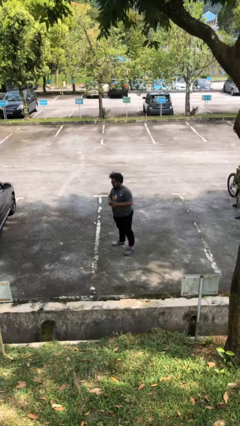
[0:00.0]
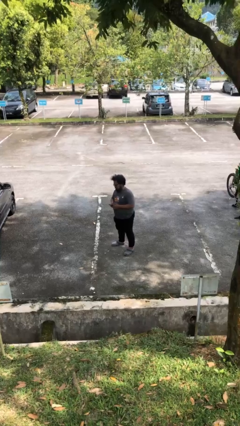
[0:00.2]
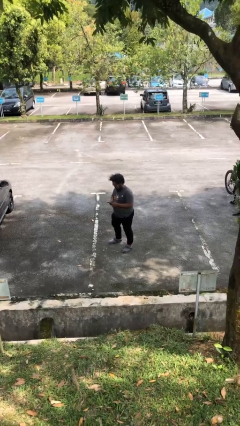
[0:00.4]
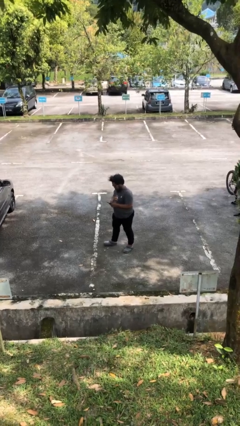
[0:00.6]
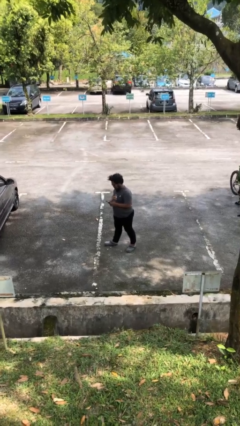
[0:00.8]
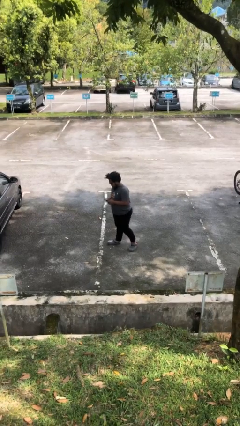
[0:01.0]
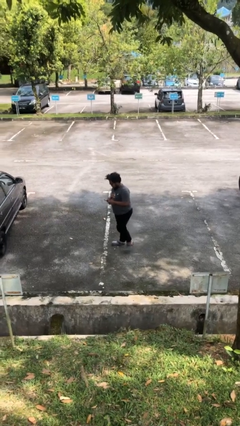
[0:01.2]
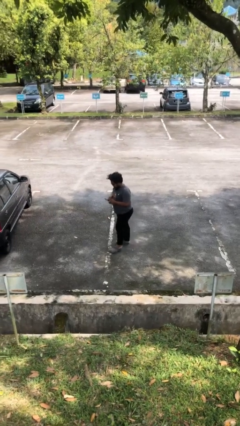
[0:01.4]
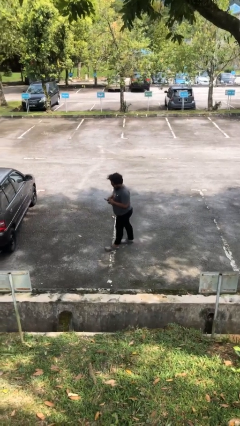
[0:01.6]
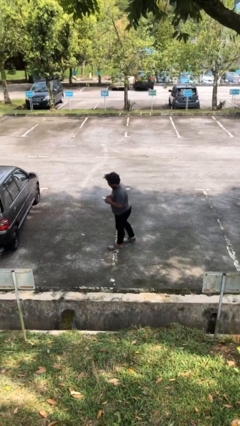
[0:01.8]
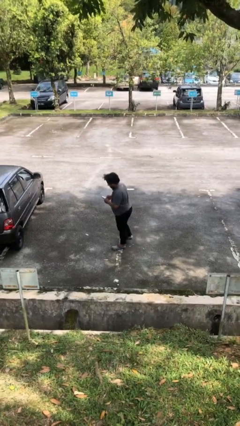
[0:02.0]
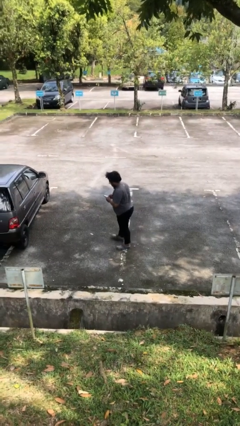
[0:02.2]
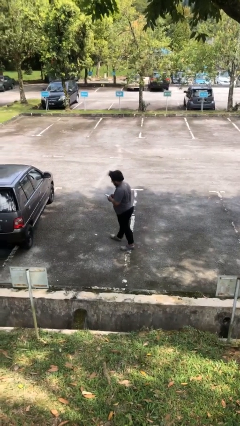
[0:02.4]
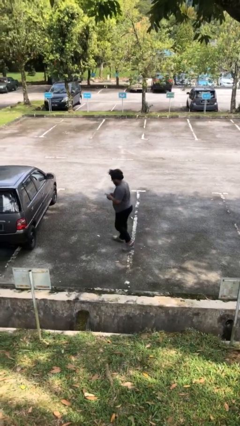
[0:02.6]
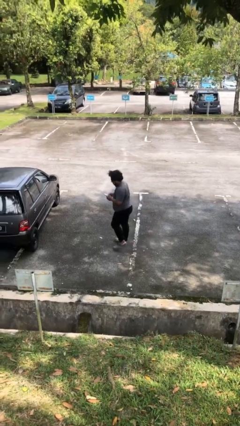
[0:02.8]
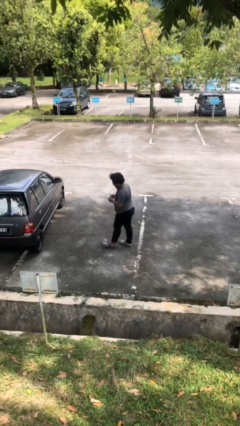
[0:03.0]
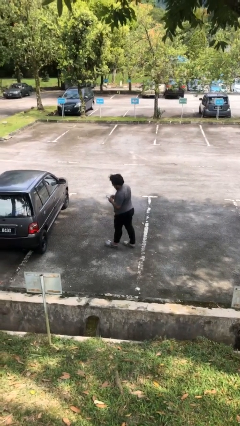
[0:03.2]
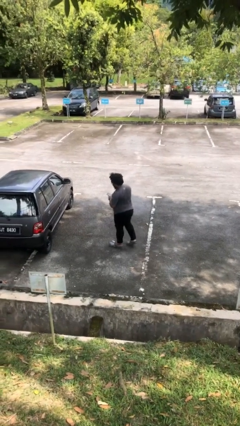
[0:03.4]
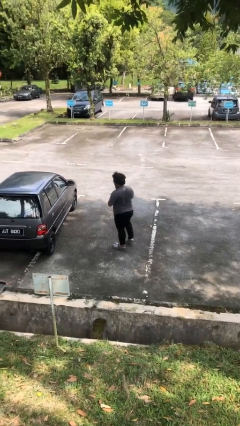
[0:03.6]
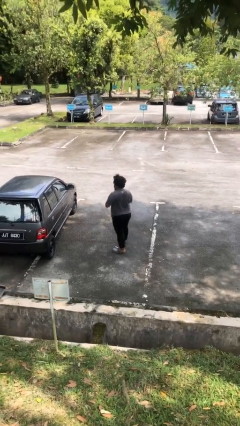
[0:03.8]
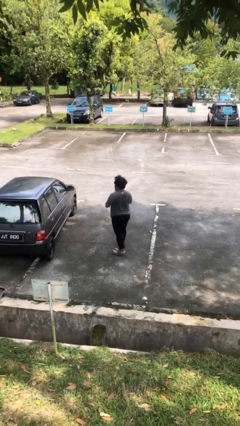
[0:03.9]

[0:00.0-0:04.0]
person texts on phone

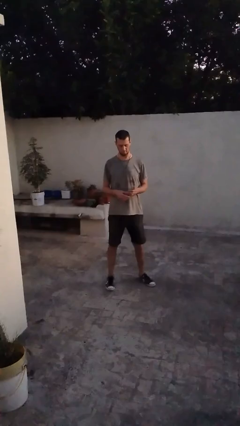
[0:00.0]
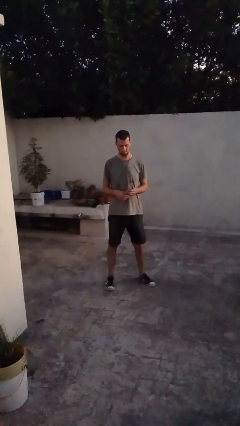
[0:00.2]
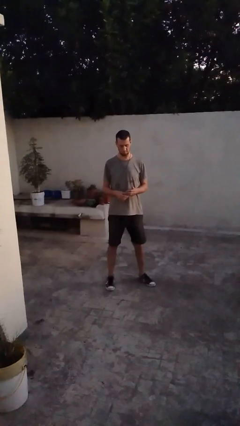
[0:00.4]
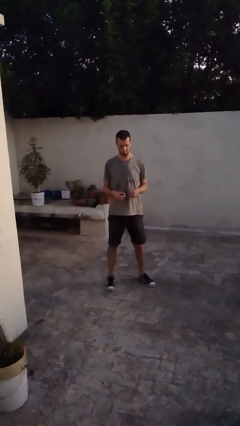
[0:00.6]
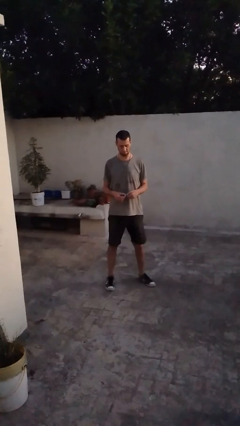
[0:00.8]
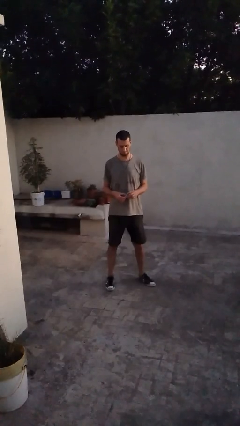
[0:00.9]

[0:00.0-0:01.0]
person takes off ring

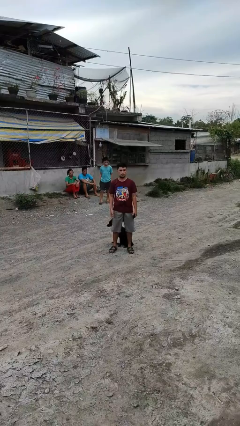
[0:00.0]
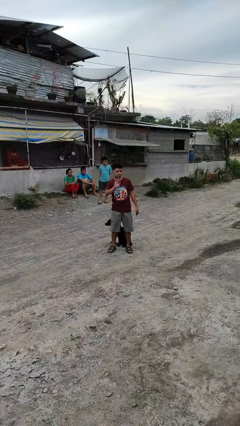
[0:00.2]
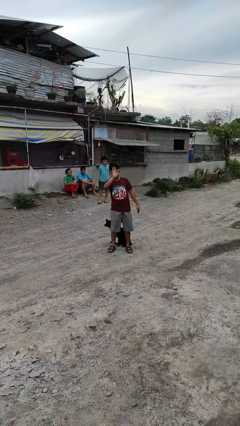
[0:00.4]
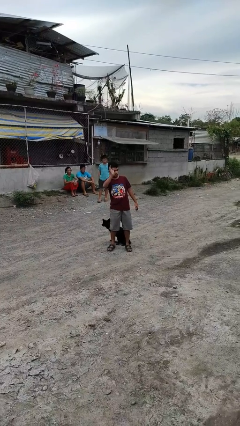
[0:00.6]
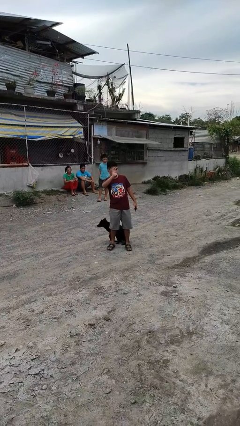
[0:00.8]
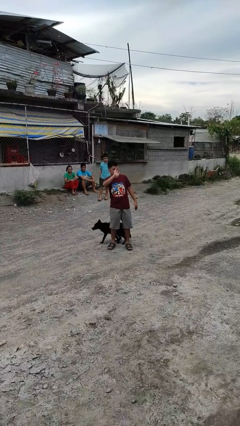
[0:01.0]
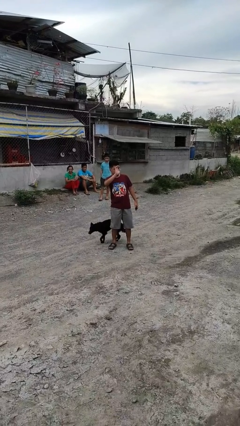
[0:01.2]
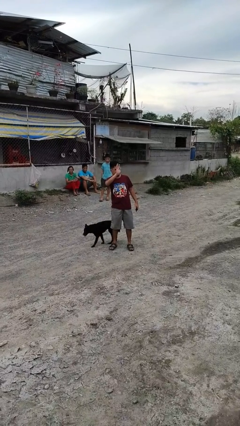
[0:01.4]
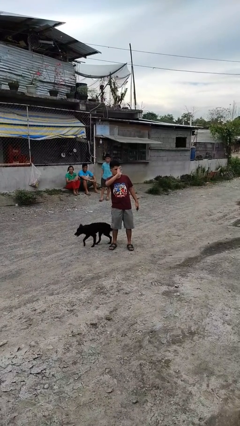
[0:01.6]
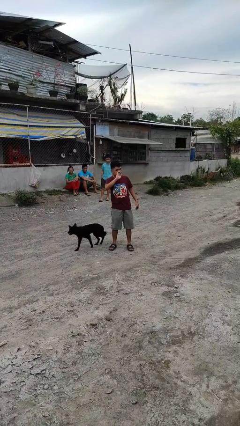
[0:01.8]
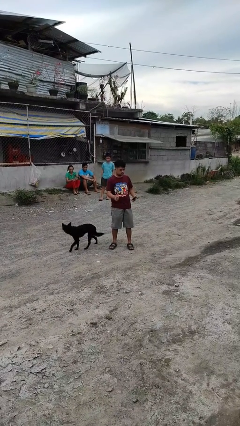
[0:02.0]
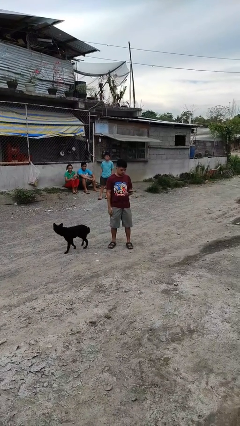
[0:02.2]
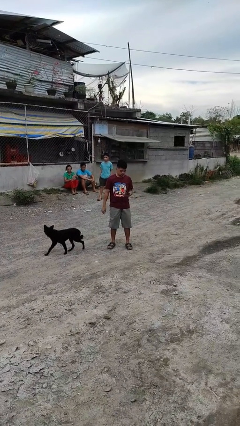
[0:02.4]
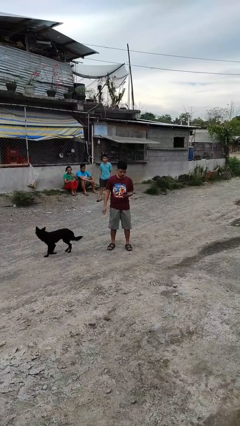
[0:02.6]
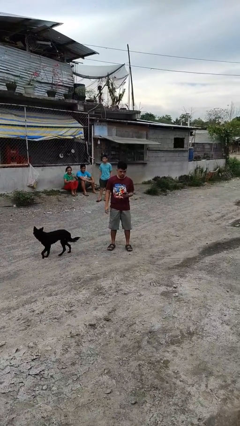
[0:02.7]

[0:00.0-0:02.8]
person waves at person

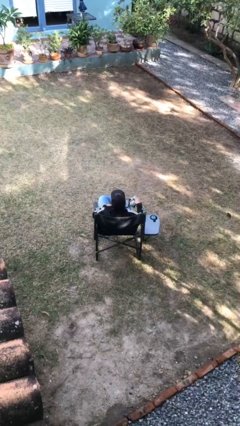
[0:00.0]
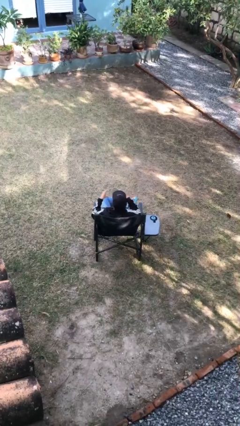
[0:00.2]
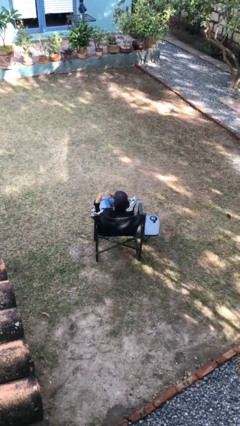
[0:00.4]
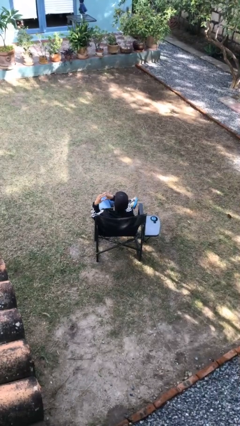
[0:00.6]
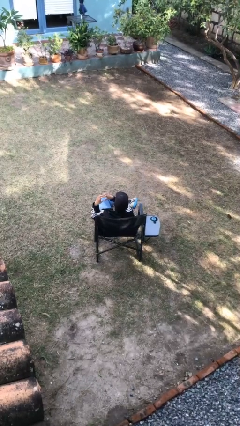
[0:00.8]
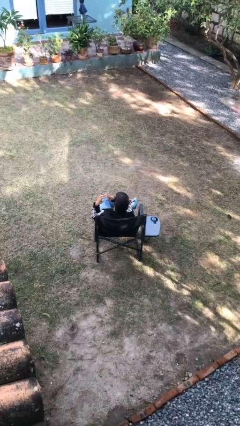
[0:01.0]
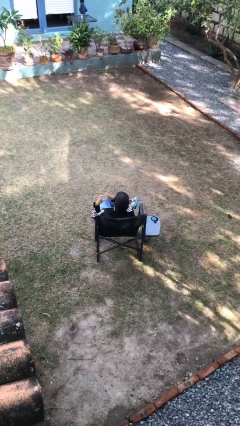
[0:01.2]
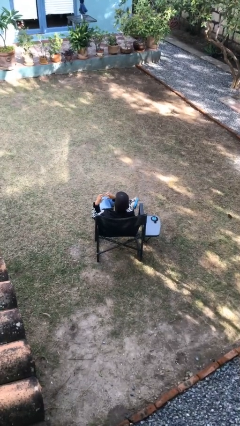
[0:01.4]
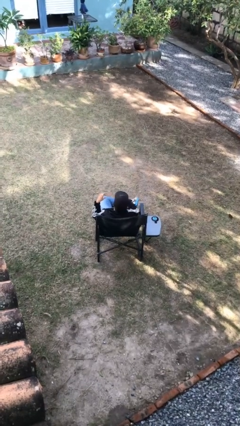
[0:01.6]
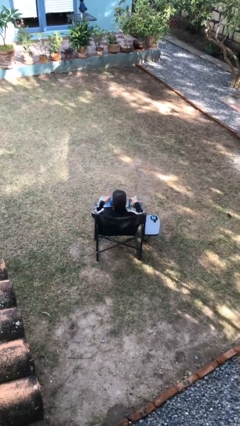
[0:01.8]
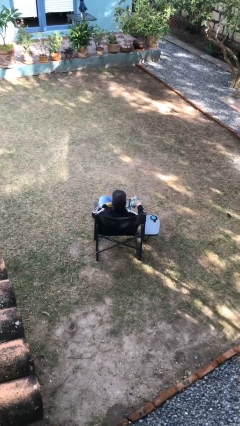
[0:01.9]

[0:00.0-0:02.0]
person gestures heart

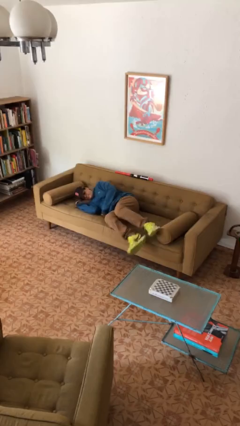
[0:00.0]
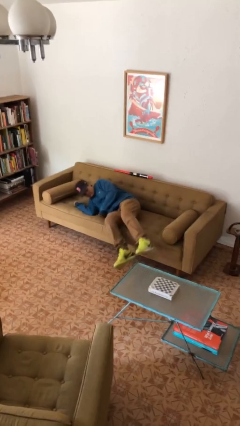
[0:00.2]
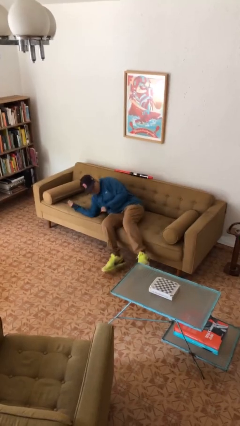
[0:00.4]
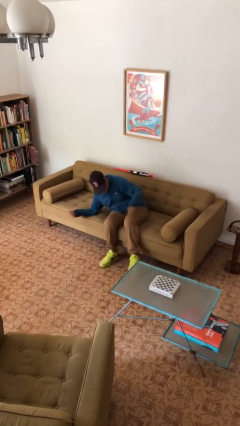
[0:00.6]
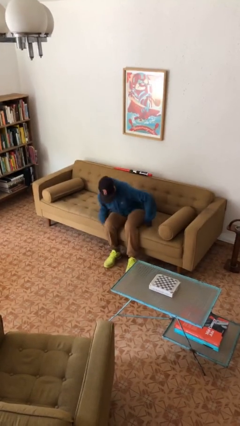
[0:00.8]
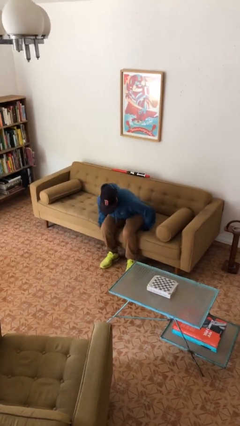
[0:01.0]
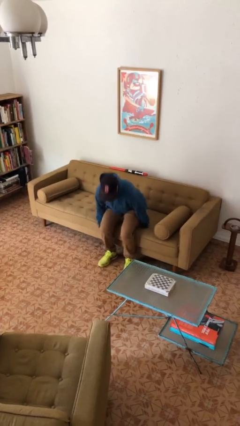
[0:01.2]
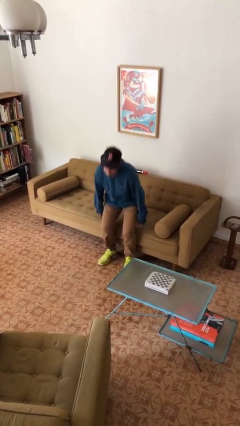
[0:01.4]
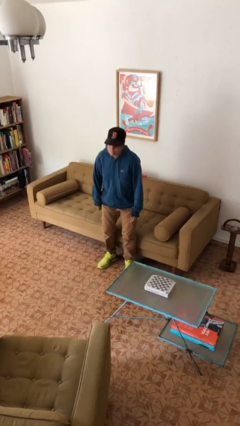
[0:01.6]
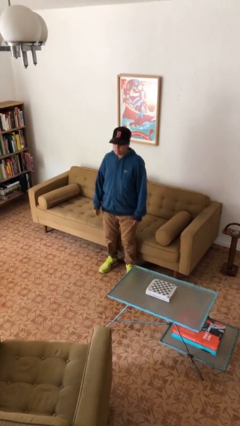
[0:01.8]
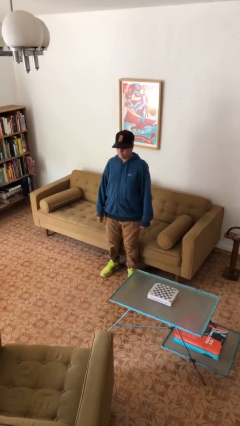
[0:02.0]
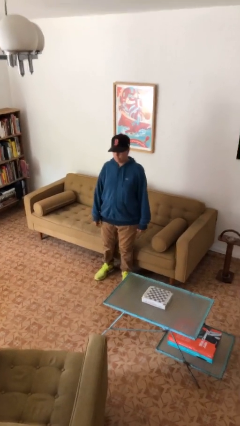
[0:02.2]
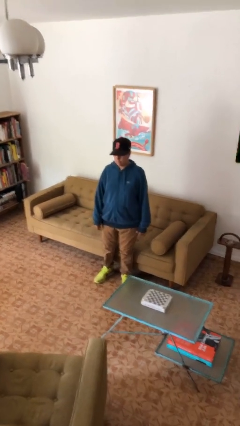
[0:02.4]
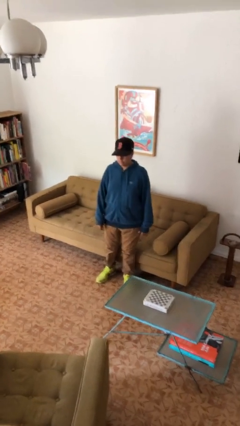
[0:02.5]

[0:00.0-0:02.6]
person stands up

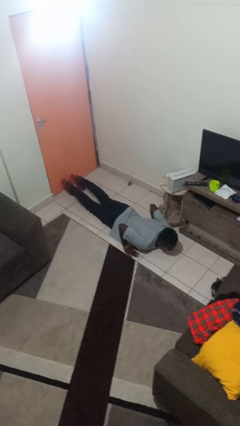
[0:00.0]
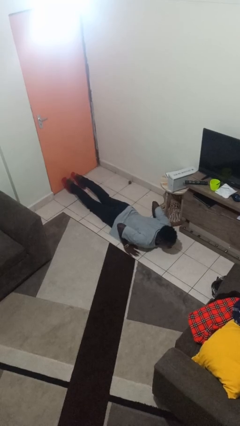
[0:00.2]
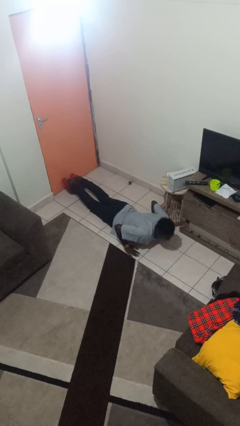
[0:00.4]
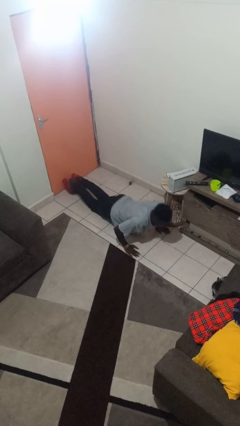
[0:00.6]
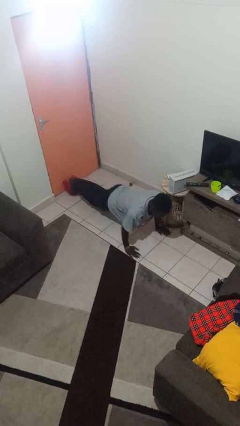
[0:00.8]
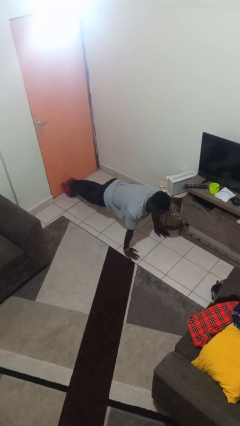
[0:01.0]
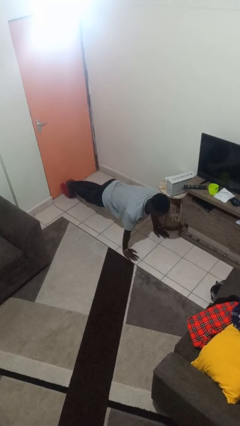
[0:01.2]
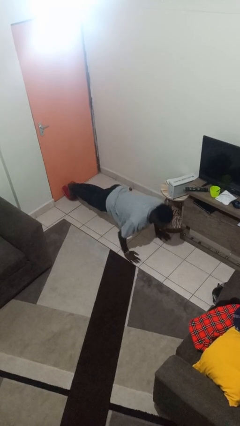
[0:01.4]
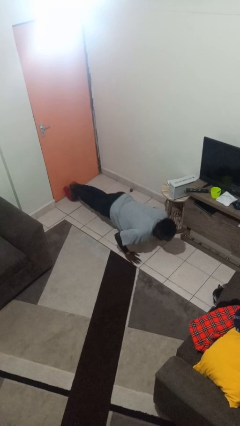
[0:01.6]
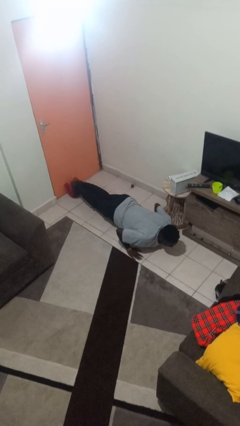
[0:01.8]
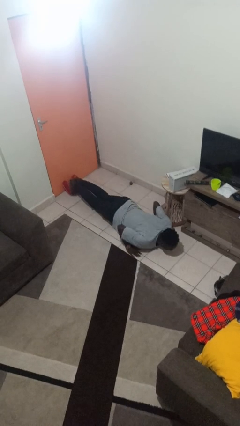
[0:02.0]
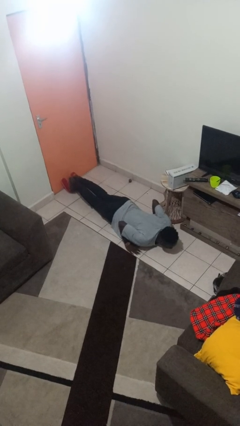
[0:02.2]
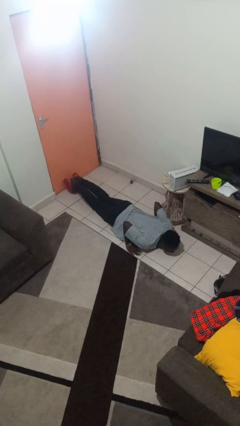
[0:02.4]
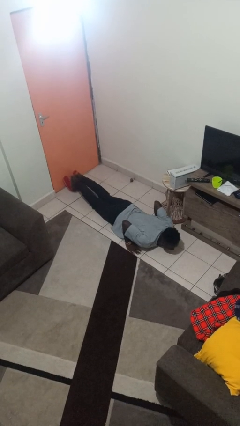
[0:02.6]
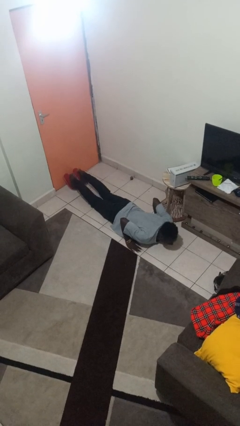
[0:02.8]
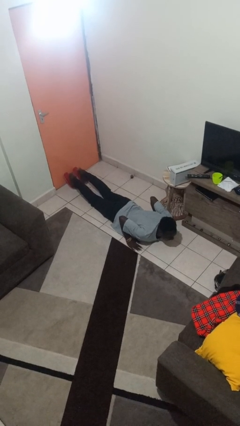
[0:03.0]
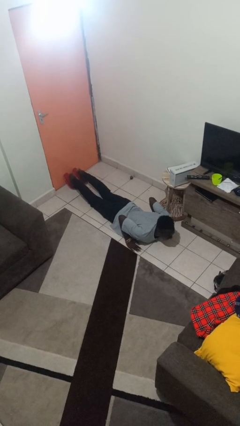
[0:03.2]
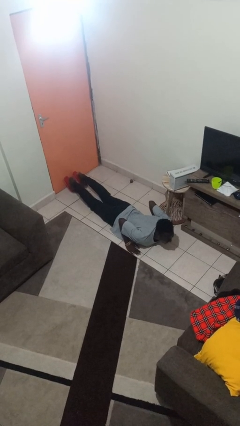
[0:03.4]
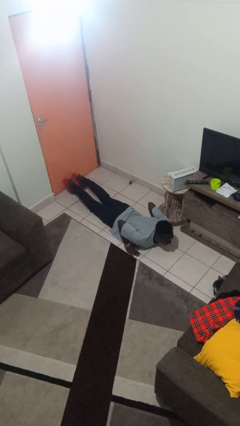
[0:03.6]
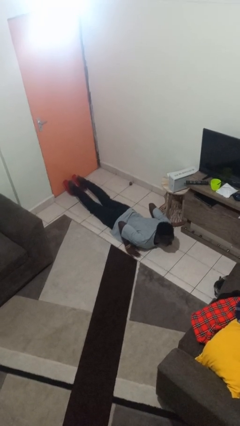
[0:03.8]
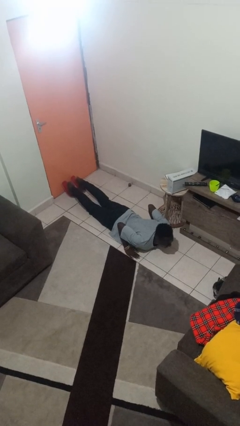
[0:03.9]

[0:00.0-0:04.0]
person exercises with pushup

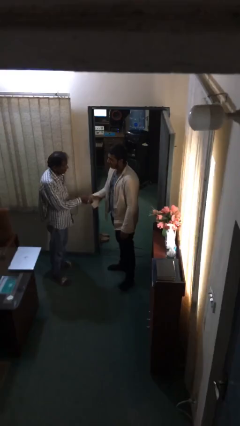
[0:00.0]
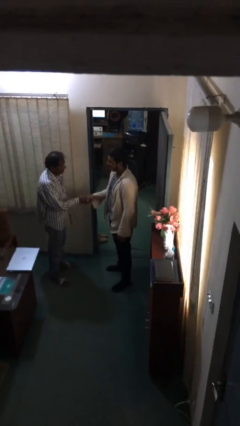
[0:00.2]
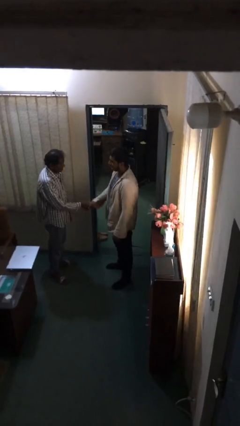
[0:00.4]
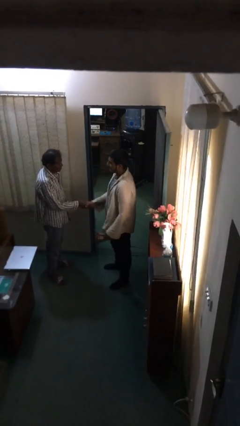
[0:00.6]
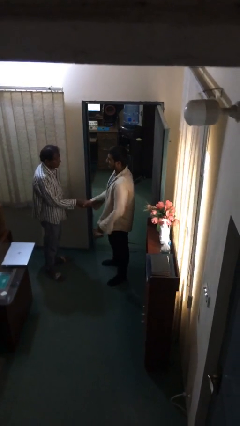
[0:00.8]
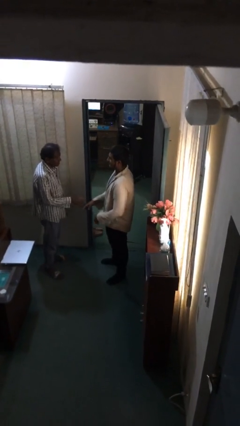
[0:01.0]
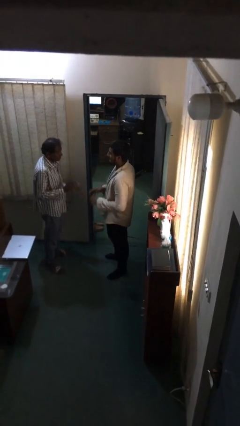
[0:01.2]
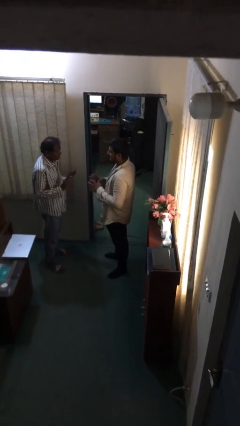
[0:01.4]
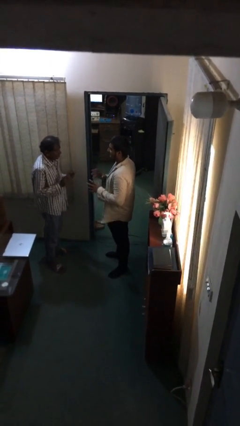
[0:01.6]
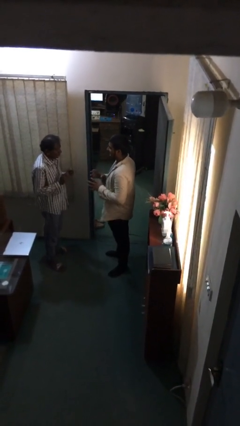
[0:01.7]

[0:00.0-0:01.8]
person shakes hand
